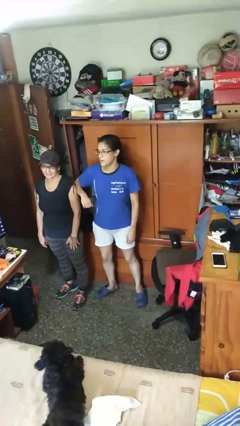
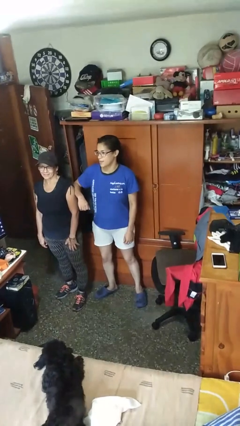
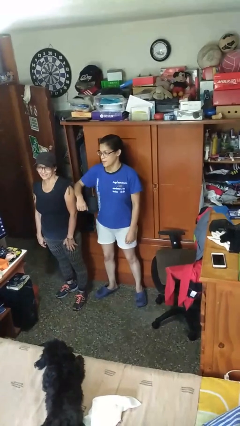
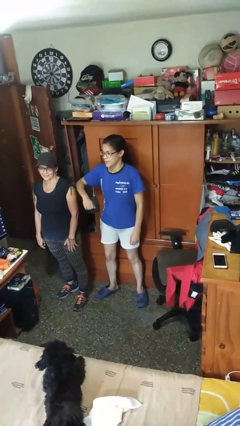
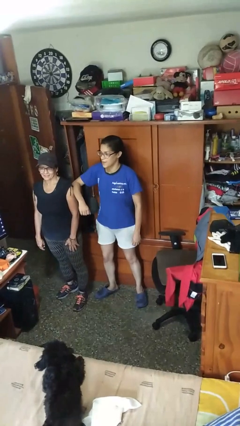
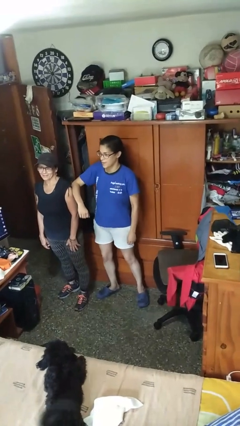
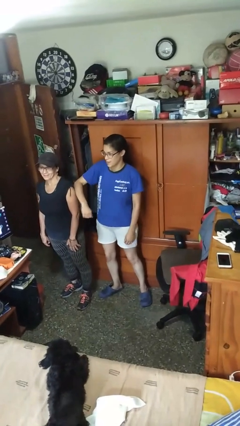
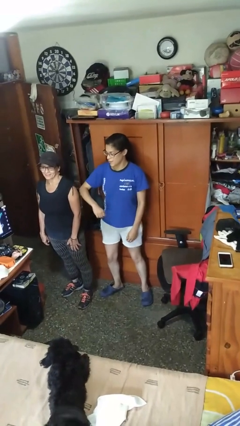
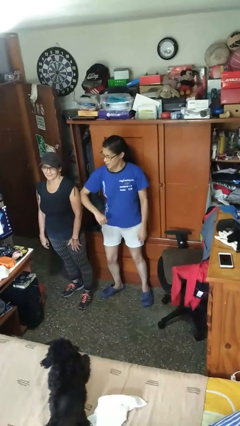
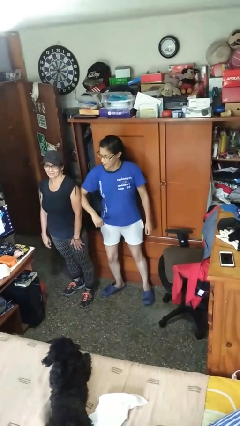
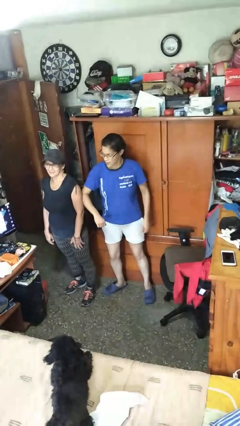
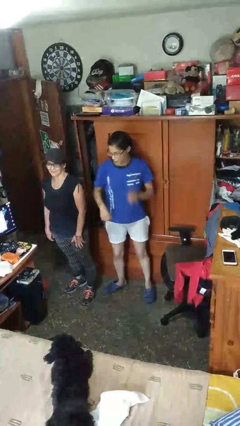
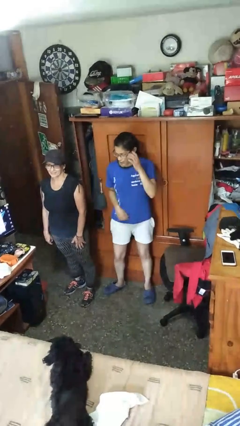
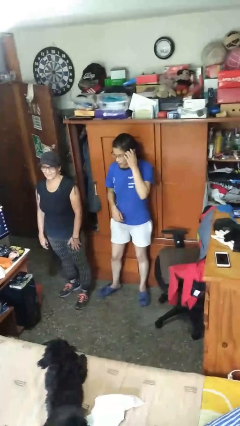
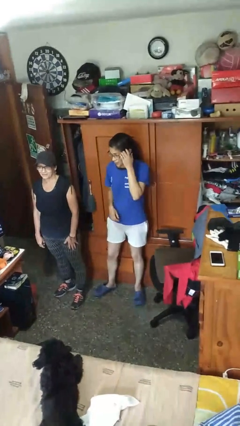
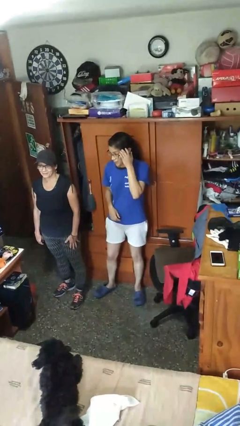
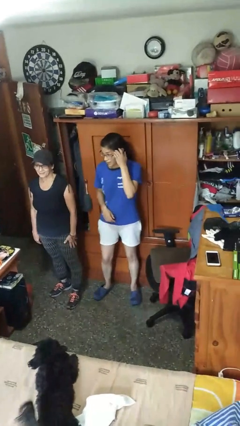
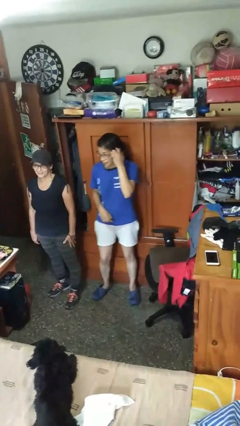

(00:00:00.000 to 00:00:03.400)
person nudges person with elbow

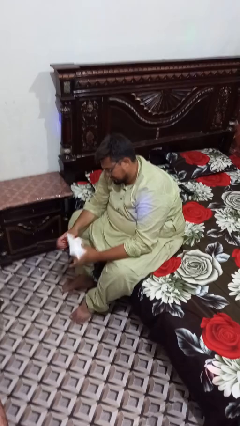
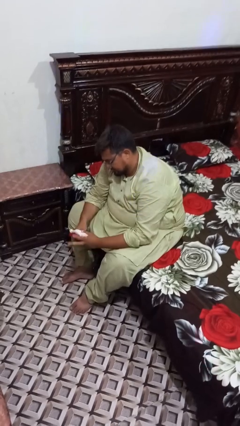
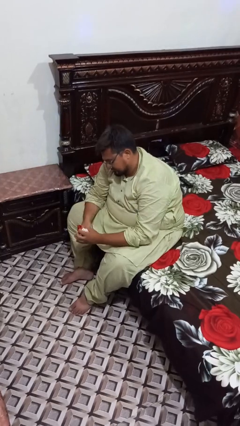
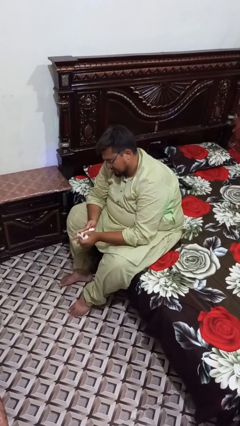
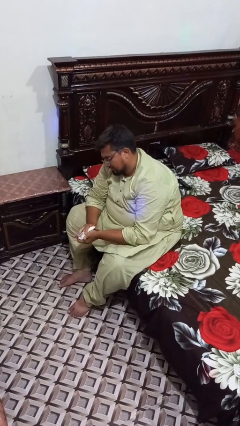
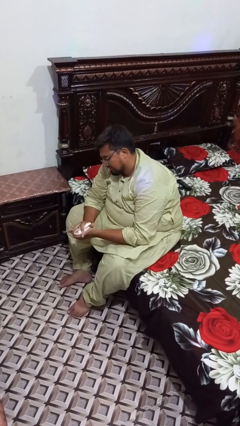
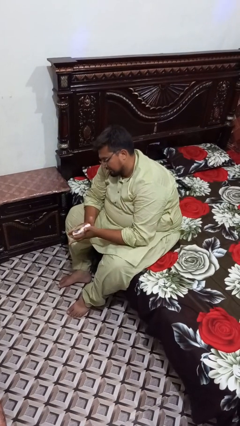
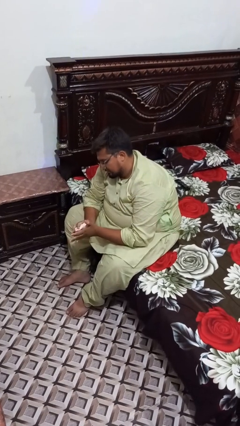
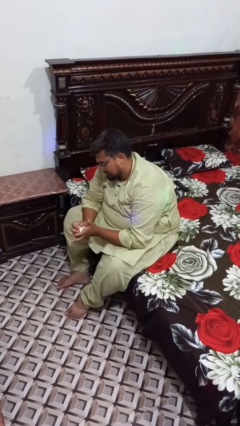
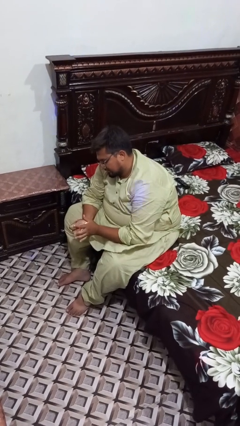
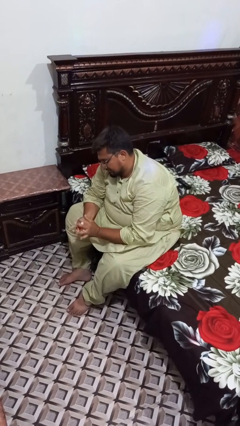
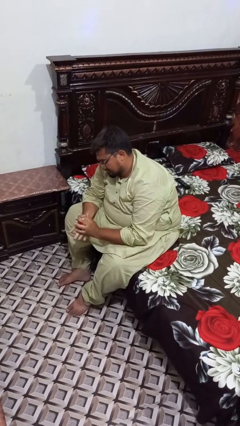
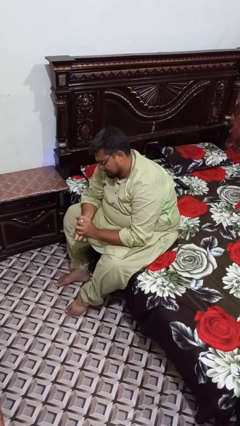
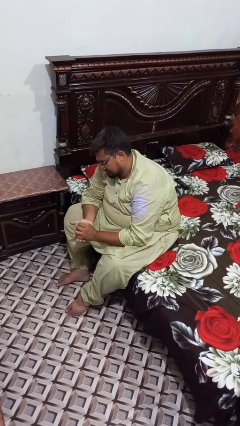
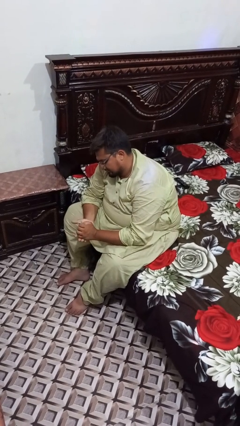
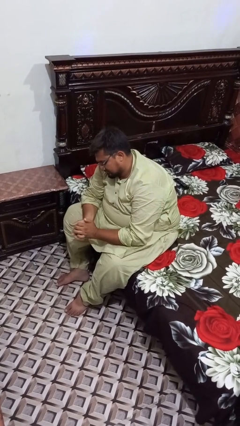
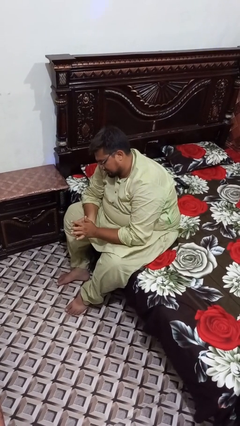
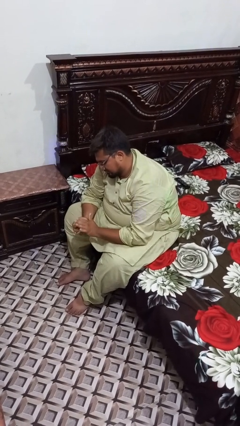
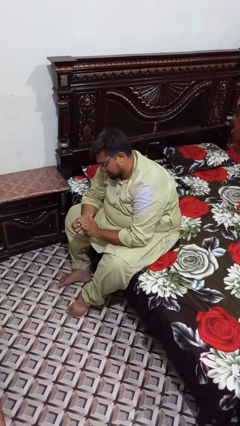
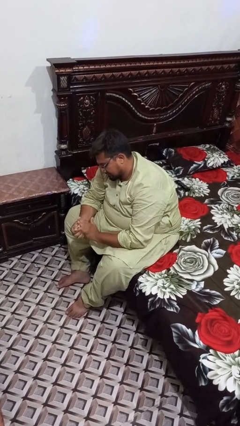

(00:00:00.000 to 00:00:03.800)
person crumples paper

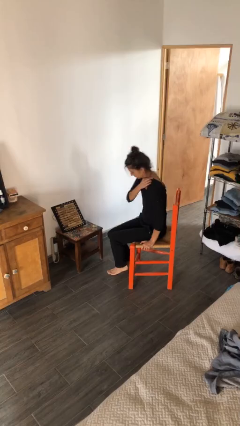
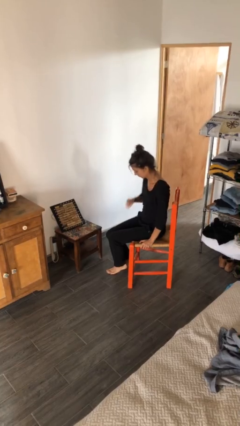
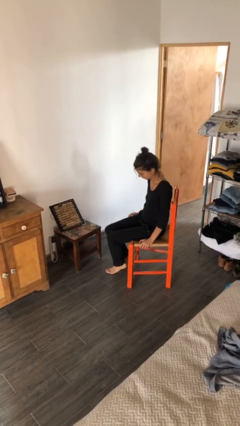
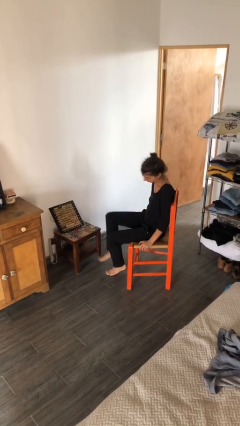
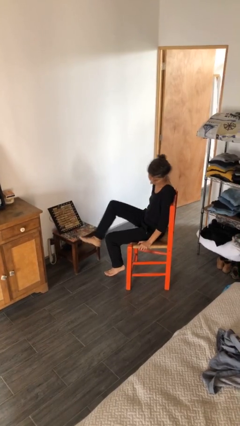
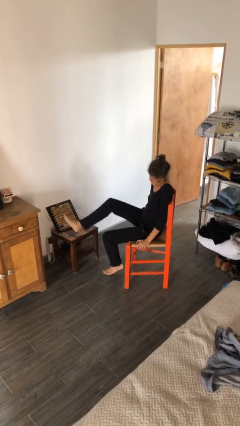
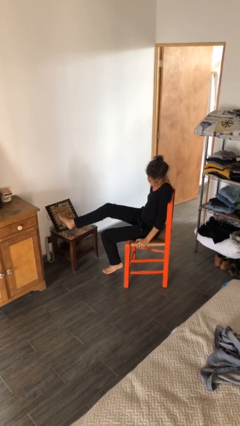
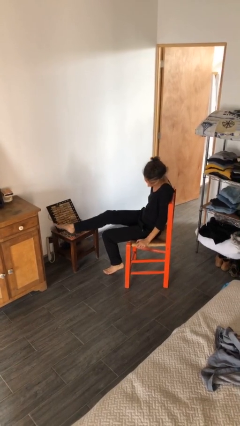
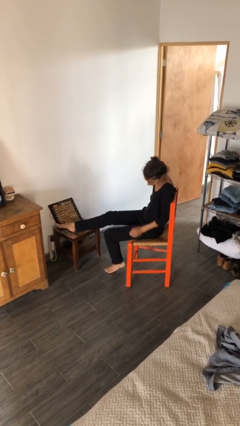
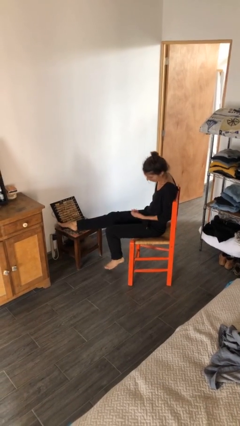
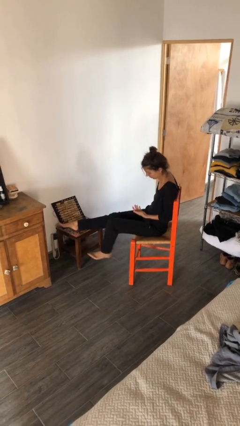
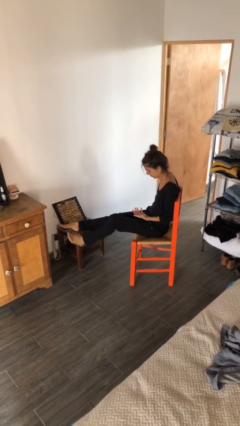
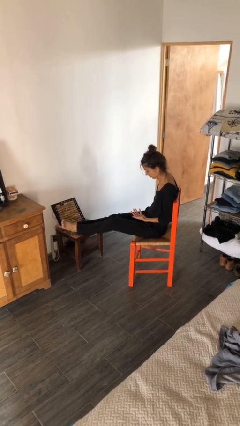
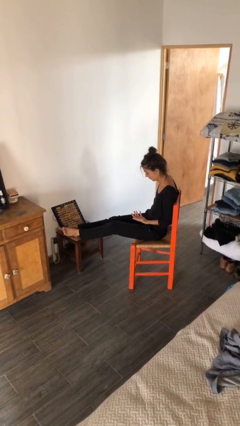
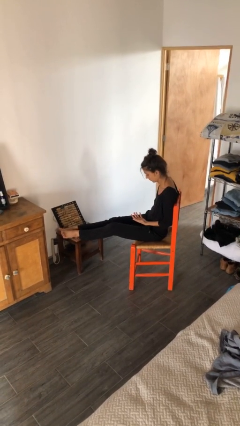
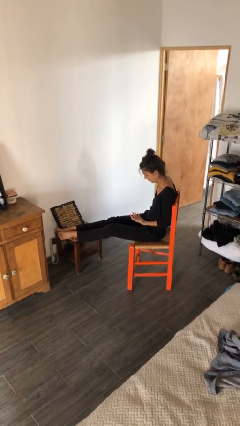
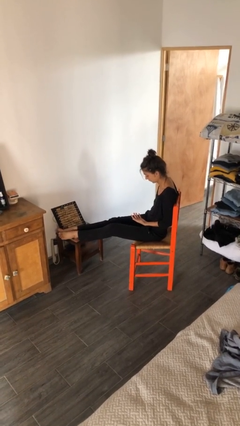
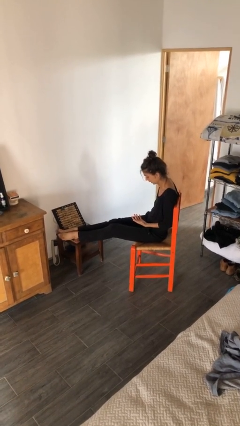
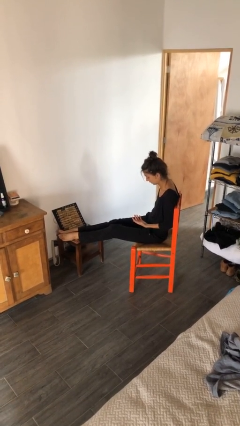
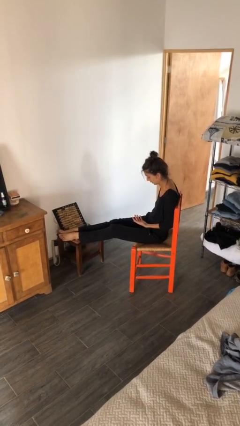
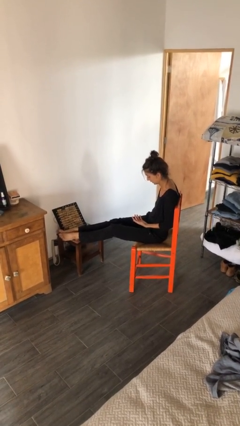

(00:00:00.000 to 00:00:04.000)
person puts feet up

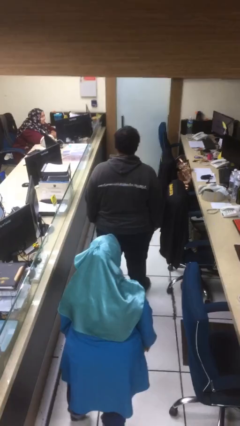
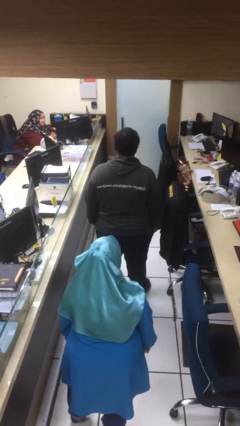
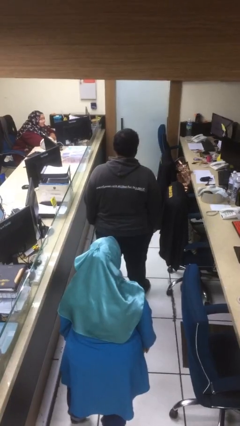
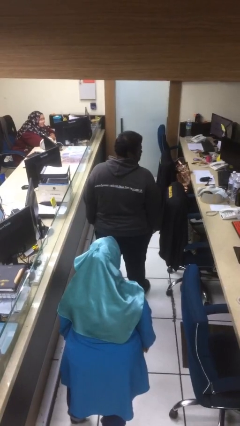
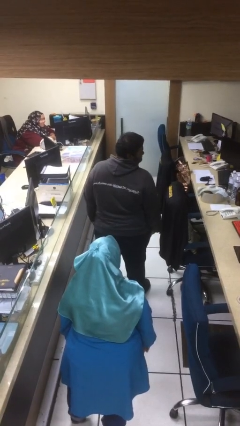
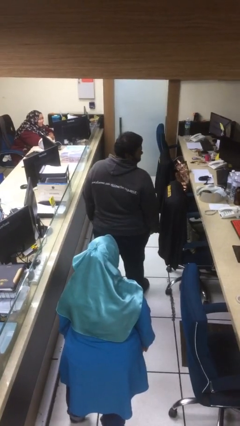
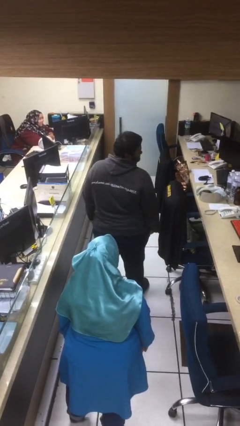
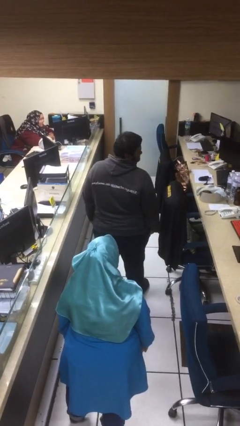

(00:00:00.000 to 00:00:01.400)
person looks over shoulder

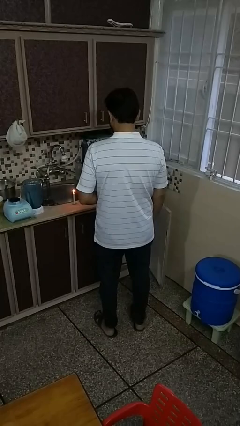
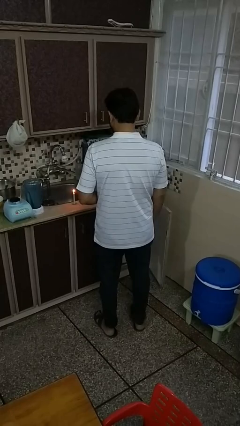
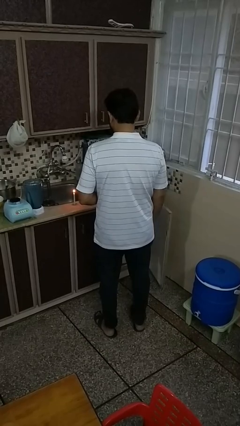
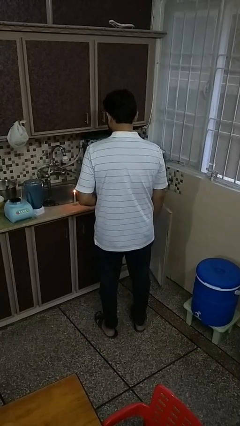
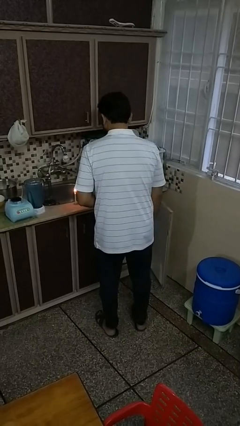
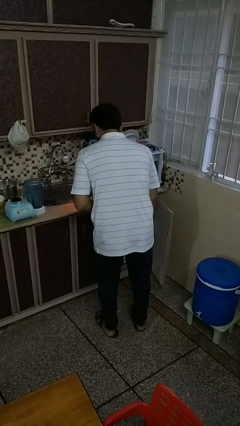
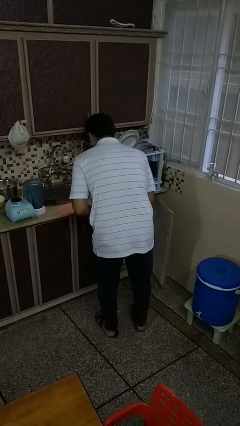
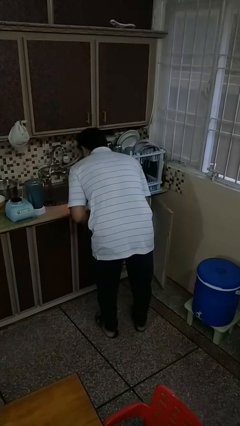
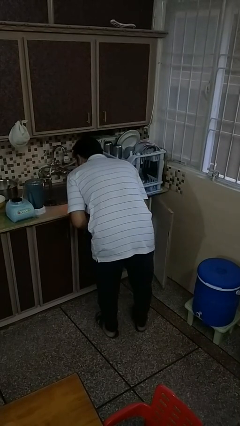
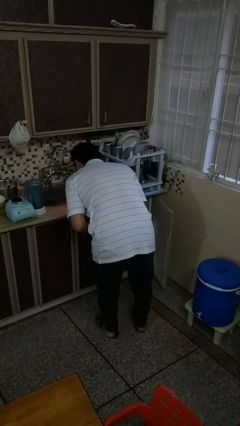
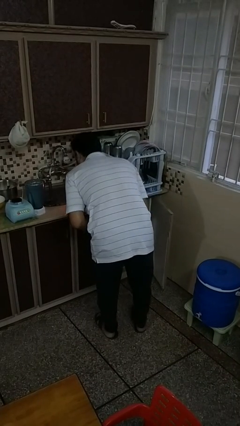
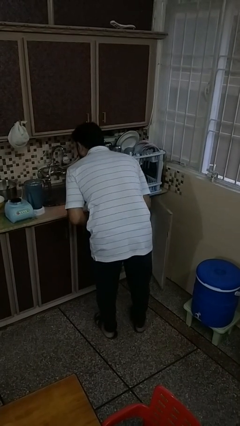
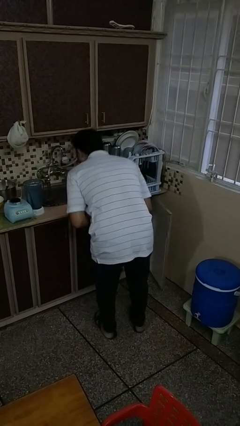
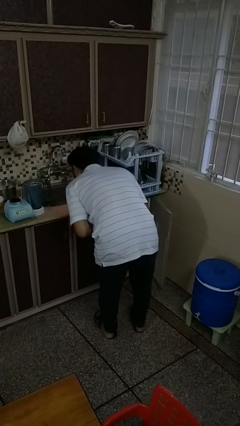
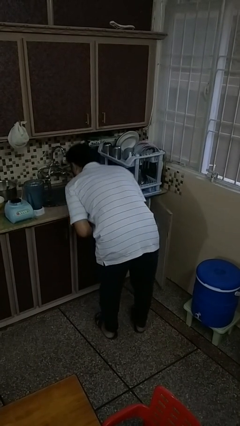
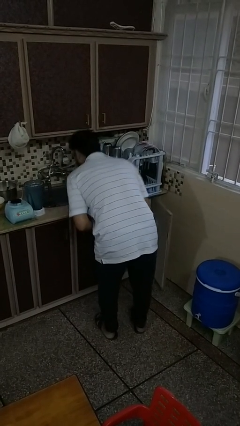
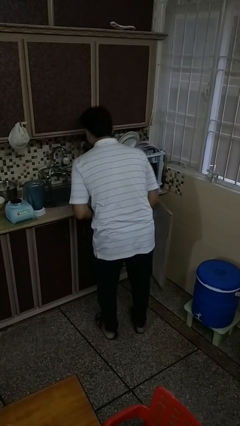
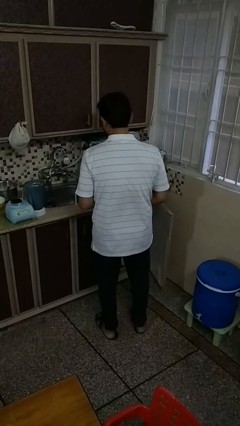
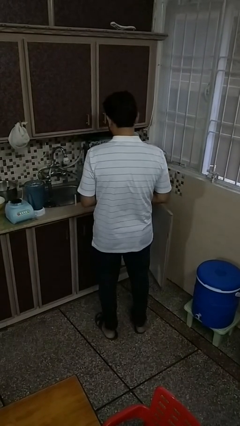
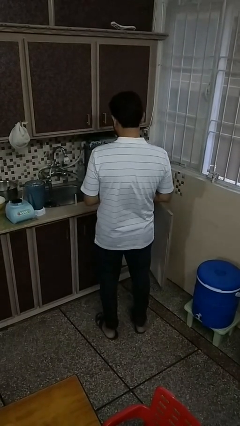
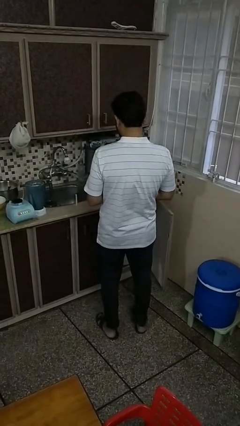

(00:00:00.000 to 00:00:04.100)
person extinguishes candle

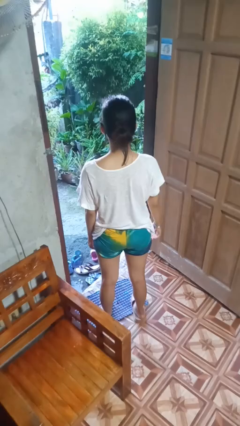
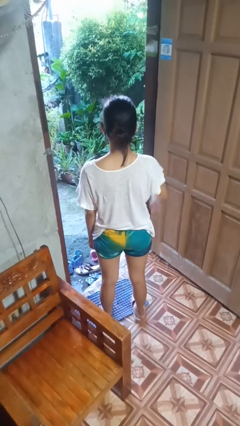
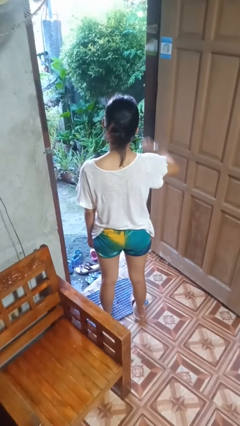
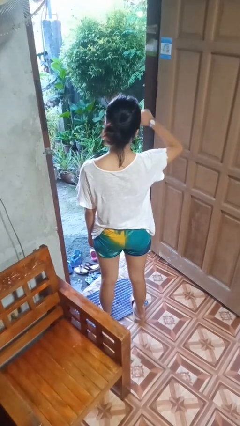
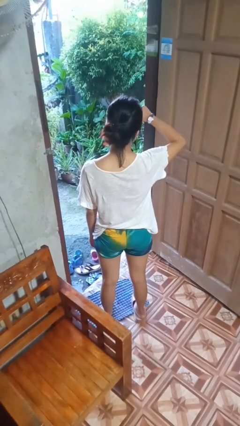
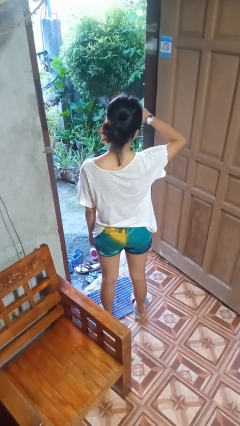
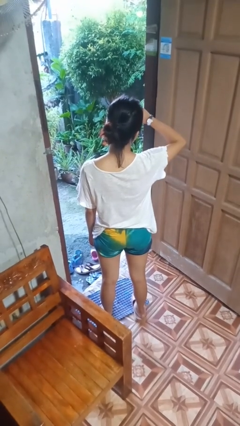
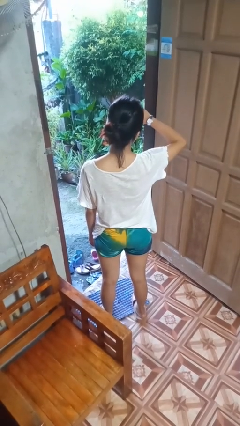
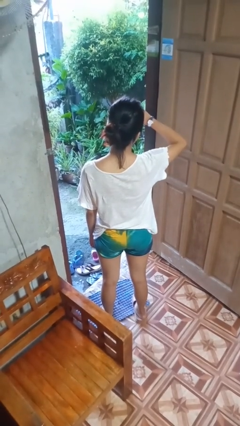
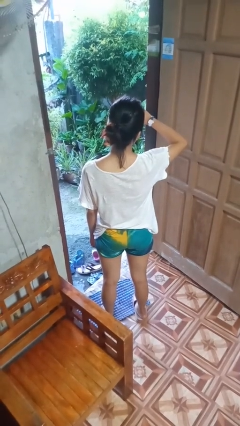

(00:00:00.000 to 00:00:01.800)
person looks at wristwatch
